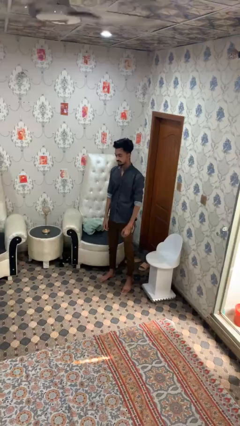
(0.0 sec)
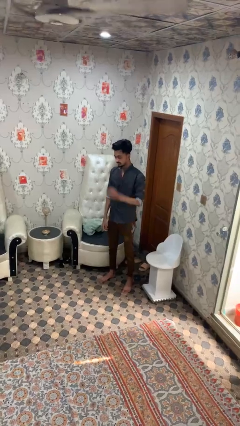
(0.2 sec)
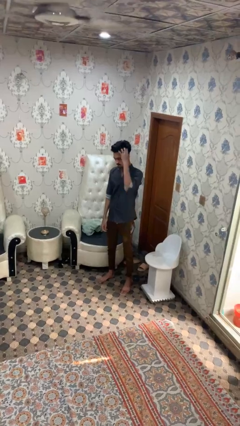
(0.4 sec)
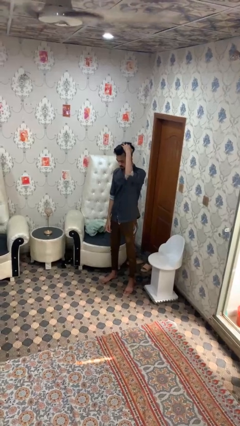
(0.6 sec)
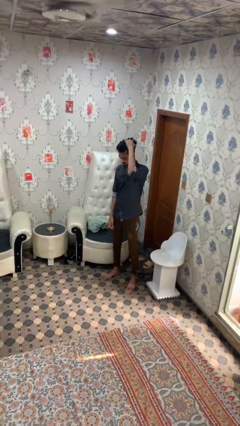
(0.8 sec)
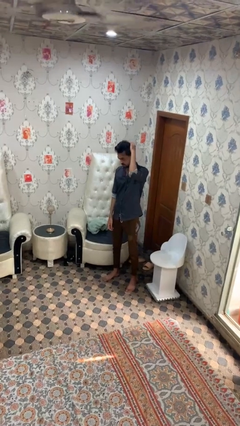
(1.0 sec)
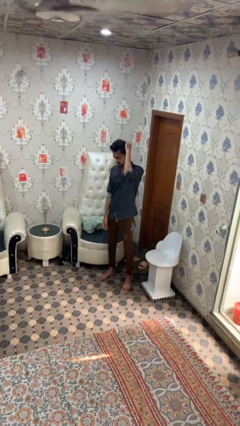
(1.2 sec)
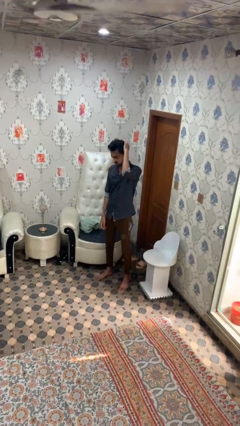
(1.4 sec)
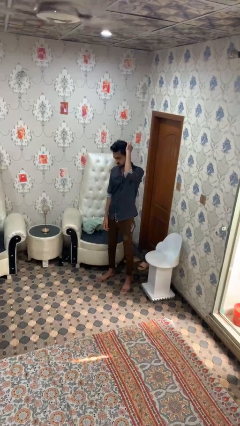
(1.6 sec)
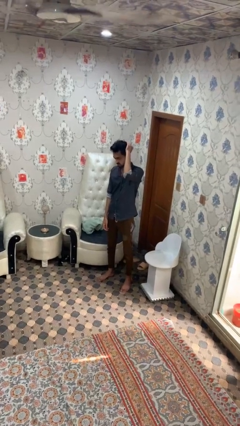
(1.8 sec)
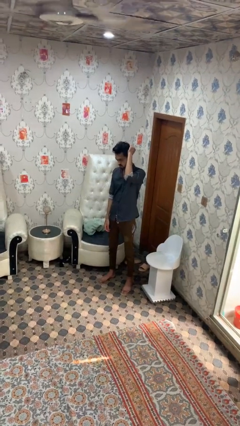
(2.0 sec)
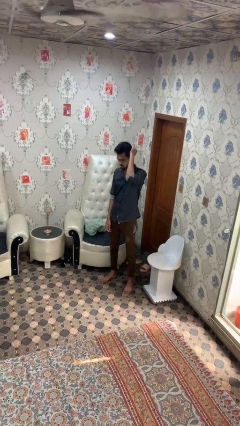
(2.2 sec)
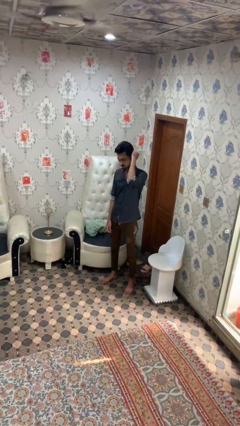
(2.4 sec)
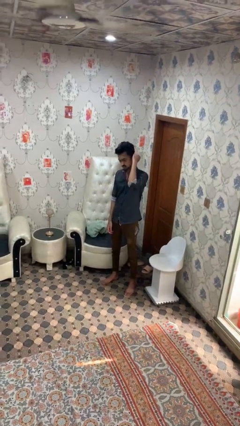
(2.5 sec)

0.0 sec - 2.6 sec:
person strokes hair

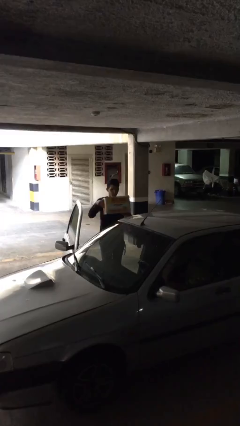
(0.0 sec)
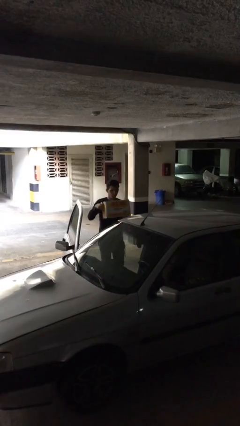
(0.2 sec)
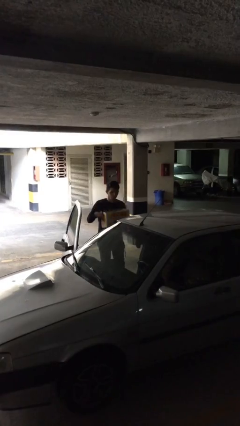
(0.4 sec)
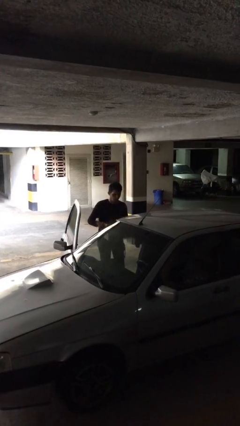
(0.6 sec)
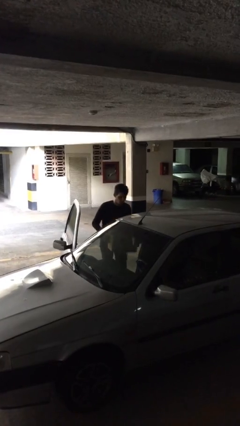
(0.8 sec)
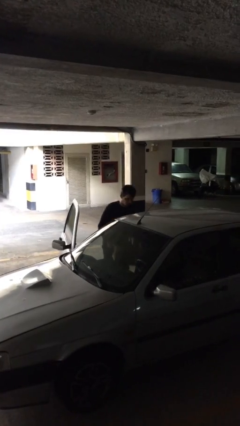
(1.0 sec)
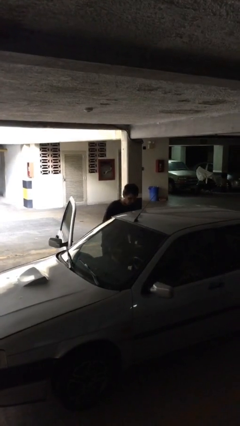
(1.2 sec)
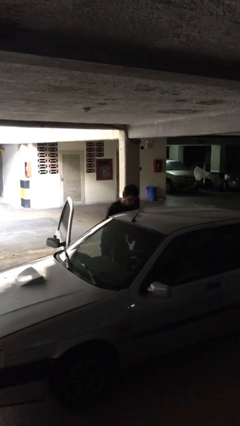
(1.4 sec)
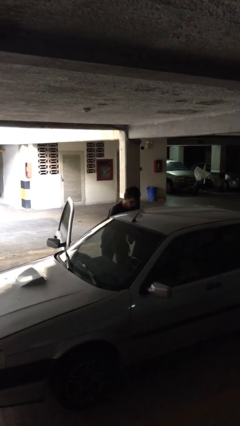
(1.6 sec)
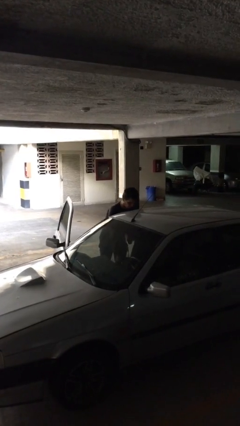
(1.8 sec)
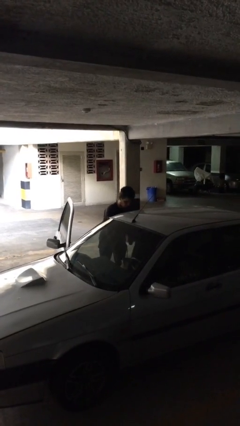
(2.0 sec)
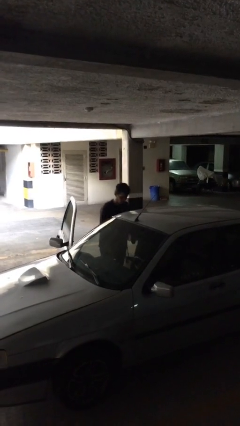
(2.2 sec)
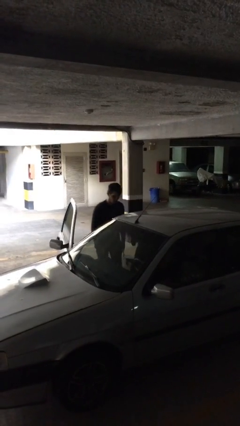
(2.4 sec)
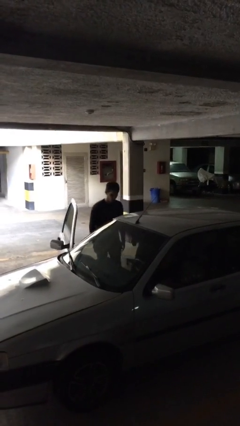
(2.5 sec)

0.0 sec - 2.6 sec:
person loads car

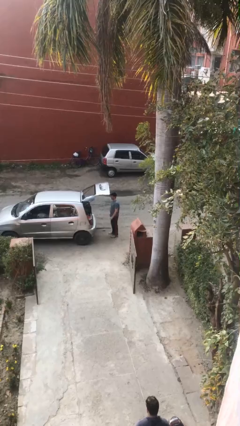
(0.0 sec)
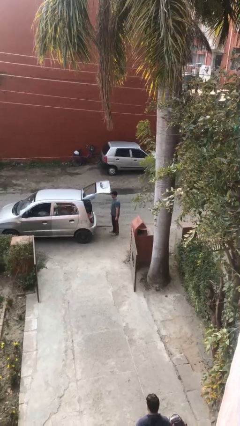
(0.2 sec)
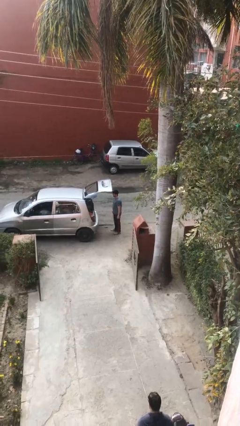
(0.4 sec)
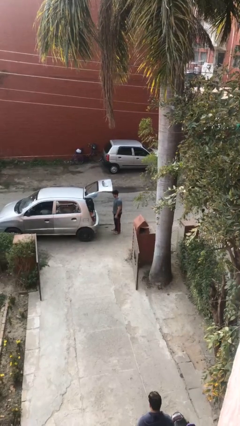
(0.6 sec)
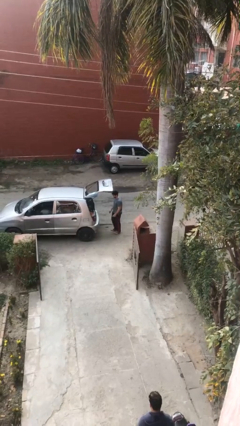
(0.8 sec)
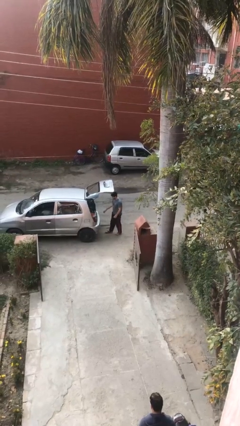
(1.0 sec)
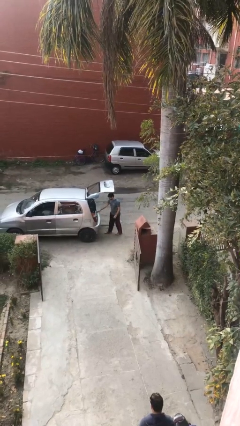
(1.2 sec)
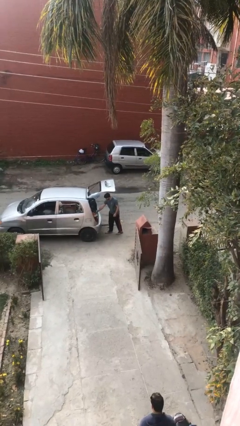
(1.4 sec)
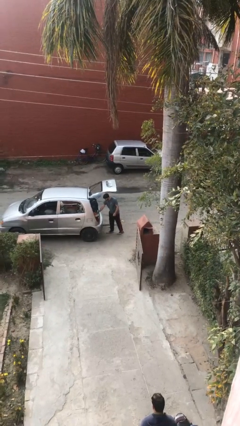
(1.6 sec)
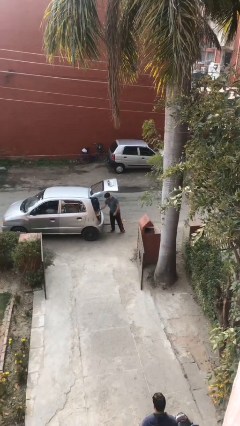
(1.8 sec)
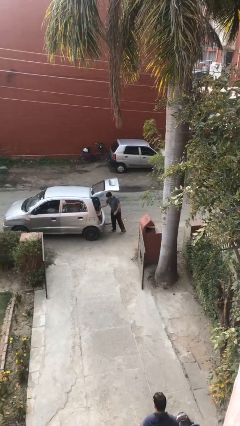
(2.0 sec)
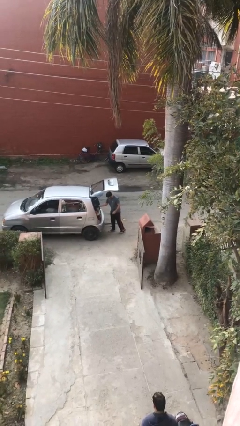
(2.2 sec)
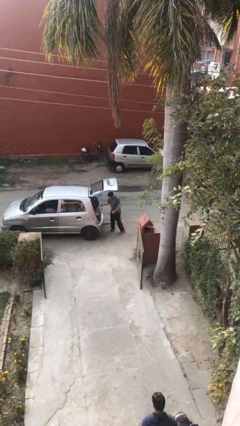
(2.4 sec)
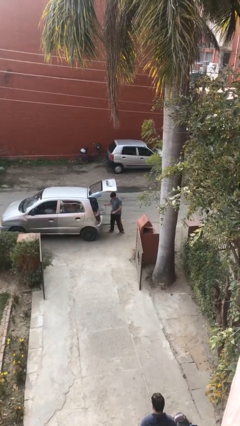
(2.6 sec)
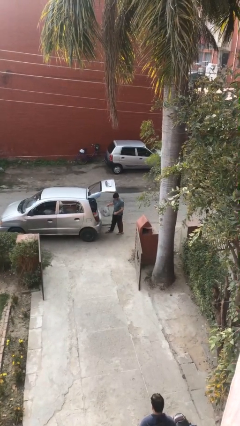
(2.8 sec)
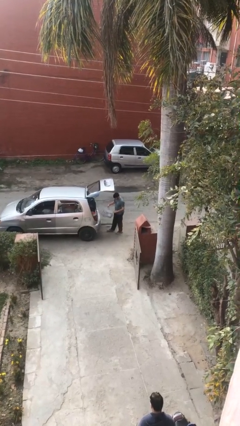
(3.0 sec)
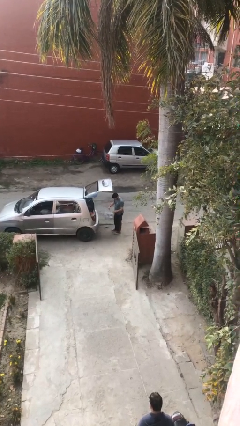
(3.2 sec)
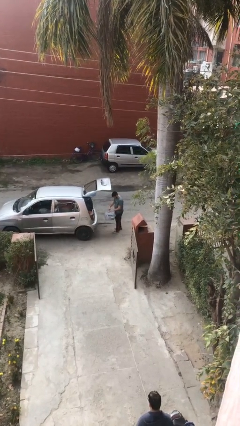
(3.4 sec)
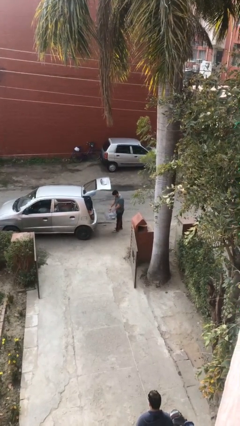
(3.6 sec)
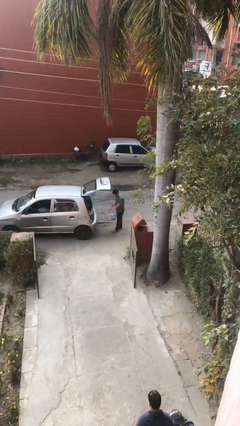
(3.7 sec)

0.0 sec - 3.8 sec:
person unloads car

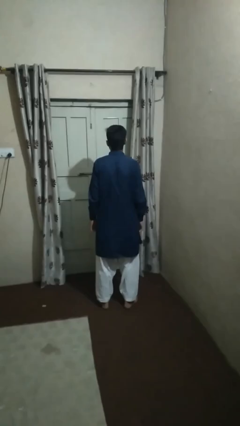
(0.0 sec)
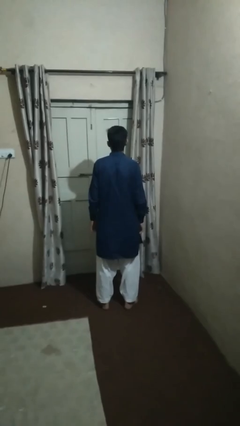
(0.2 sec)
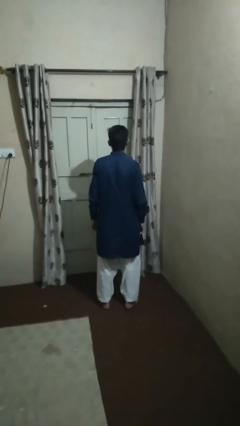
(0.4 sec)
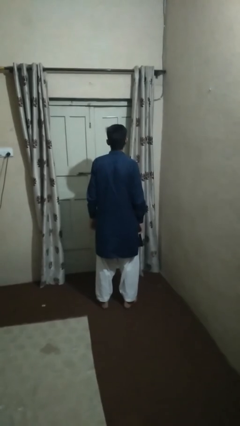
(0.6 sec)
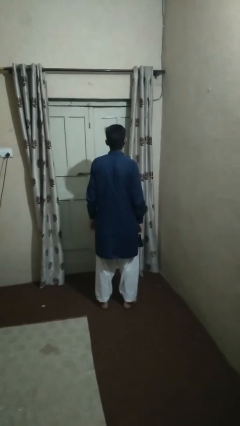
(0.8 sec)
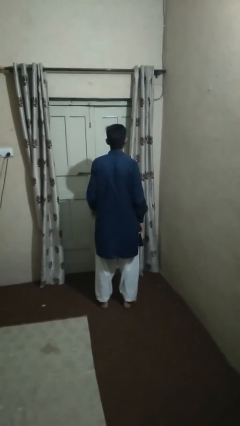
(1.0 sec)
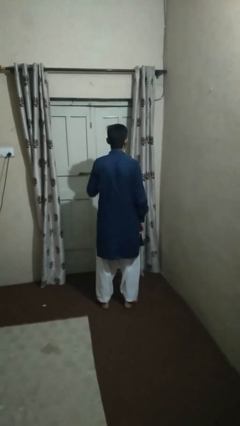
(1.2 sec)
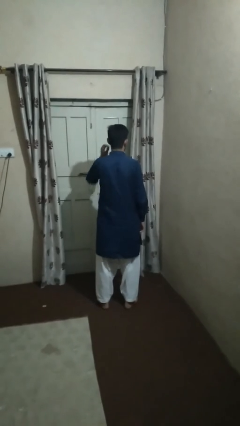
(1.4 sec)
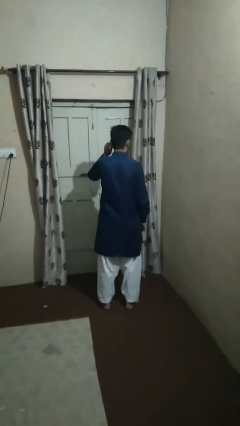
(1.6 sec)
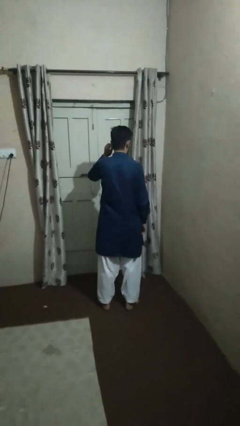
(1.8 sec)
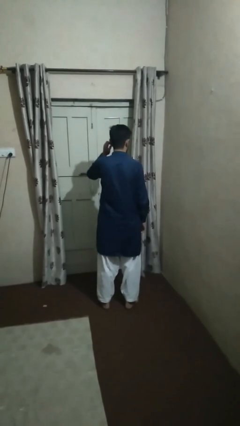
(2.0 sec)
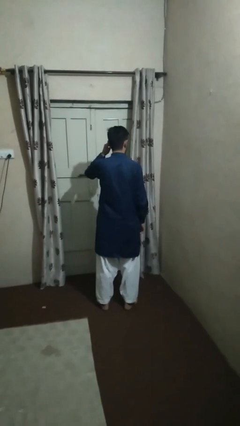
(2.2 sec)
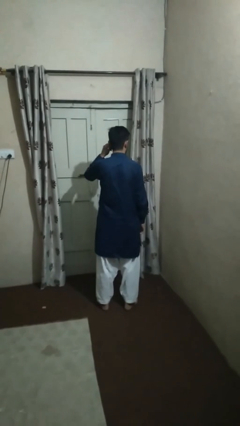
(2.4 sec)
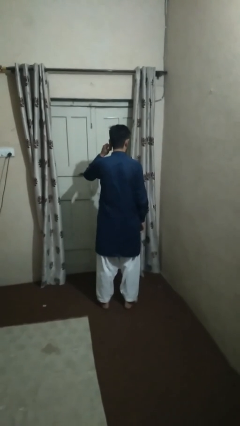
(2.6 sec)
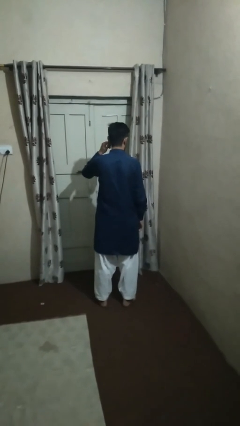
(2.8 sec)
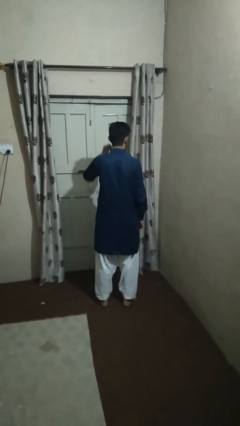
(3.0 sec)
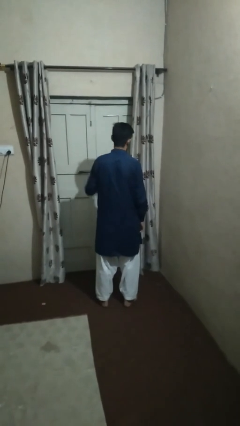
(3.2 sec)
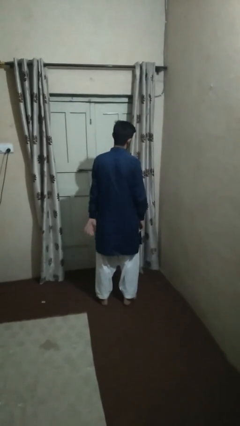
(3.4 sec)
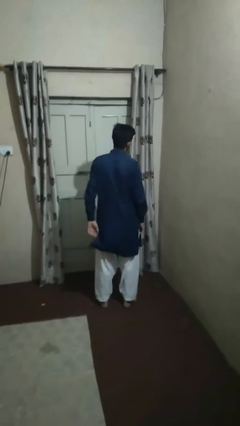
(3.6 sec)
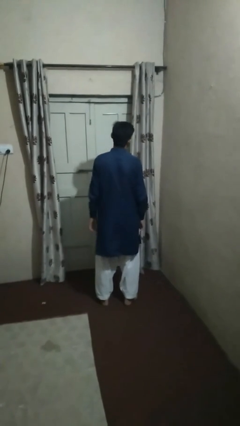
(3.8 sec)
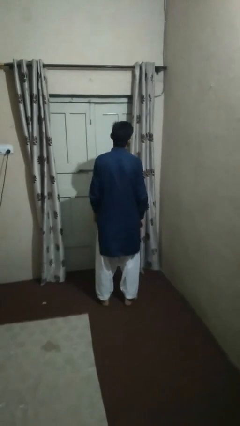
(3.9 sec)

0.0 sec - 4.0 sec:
person touches earlobe

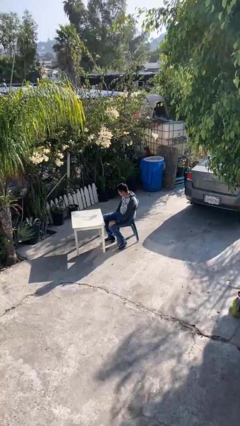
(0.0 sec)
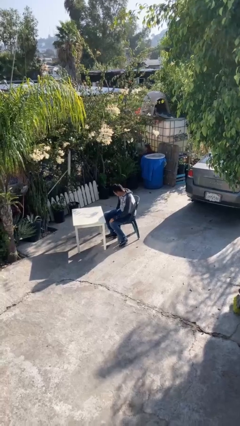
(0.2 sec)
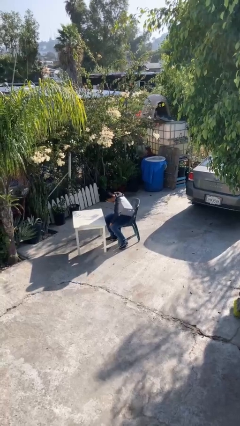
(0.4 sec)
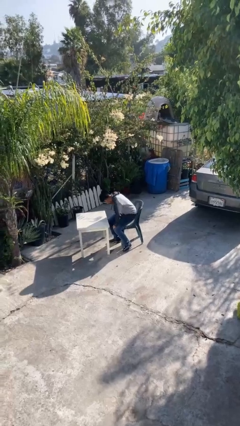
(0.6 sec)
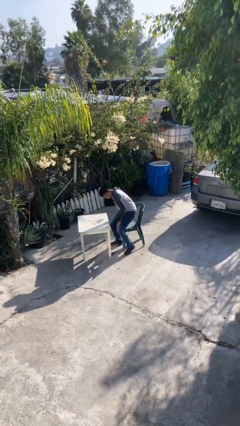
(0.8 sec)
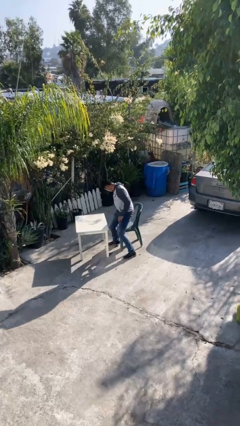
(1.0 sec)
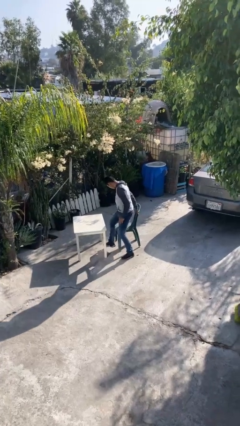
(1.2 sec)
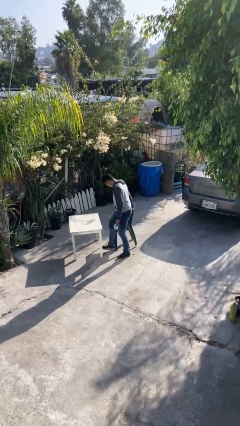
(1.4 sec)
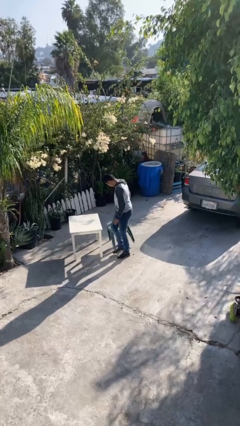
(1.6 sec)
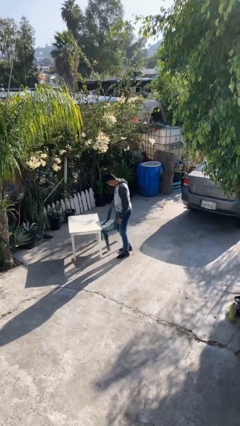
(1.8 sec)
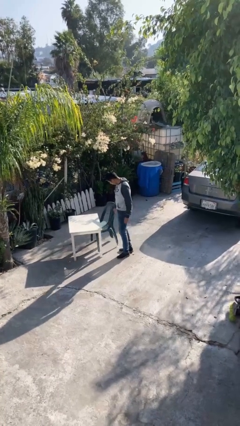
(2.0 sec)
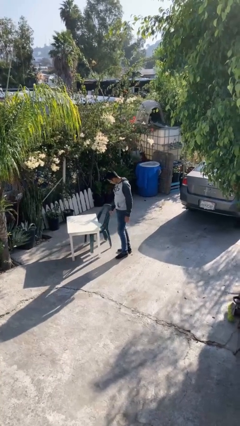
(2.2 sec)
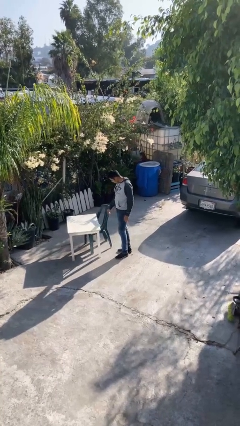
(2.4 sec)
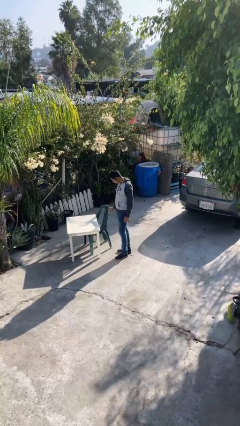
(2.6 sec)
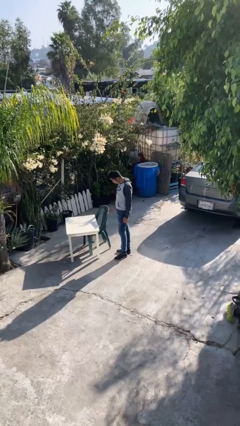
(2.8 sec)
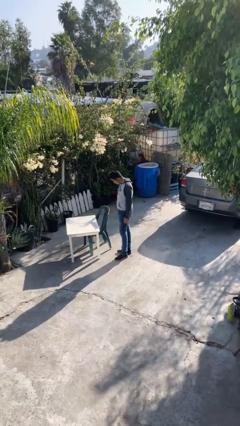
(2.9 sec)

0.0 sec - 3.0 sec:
person stands up

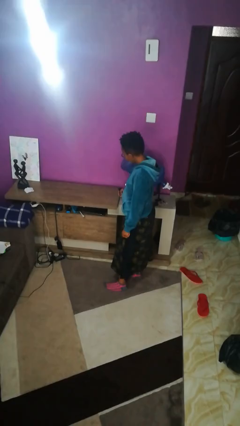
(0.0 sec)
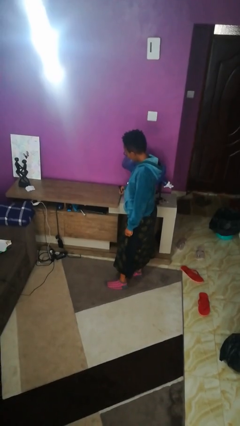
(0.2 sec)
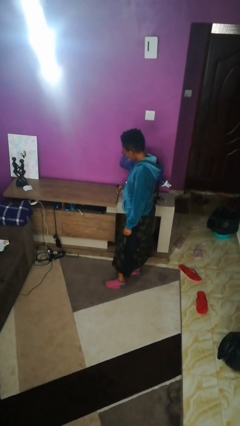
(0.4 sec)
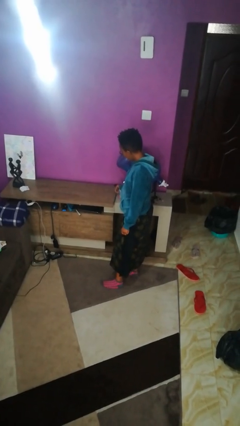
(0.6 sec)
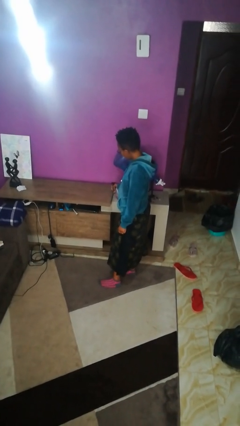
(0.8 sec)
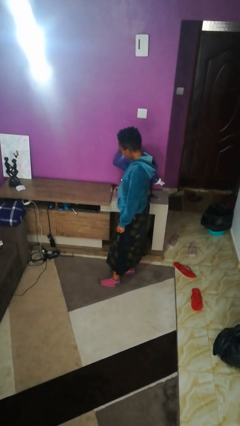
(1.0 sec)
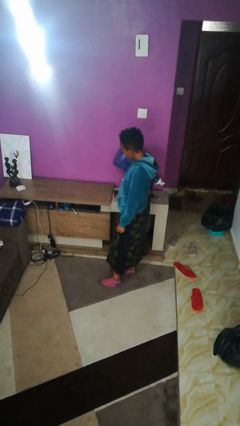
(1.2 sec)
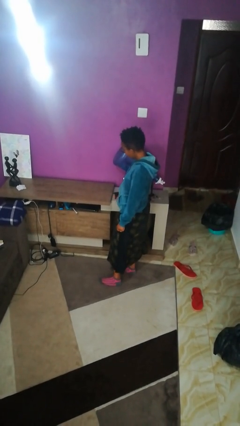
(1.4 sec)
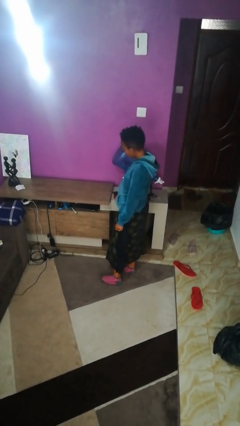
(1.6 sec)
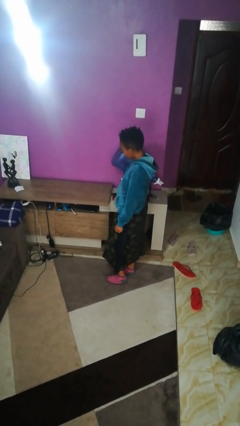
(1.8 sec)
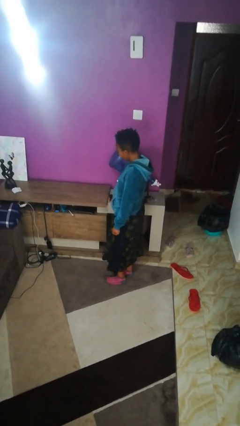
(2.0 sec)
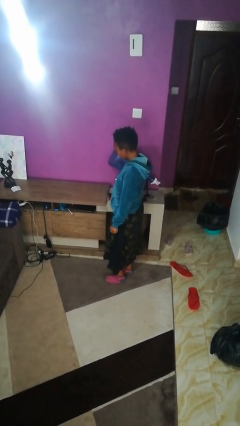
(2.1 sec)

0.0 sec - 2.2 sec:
person sprays from bottle
